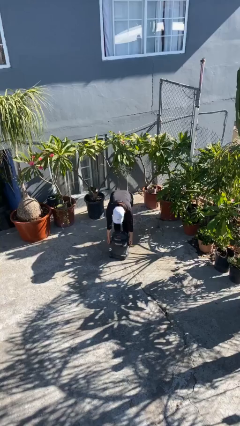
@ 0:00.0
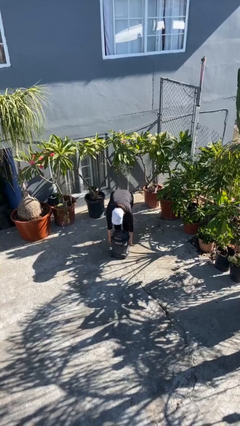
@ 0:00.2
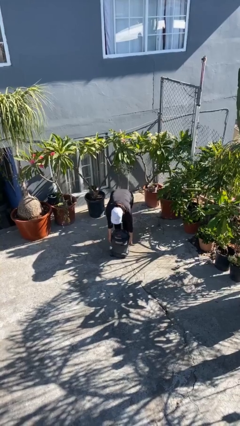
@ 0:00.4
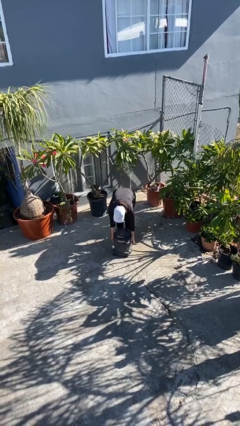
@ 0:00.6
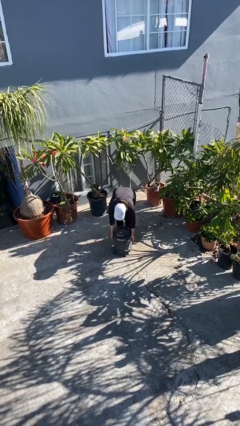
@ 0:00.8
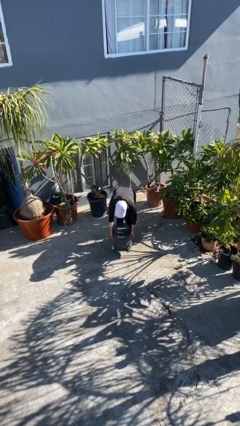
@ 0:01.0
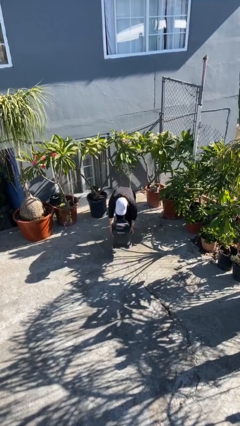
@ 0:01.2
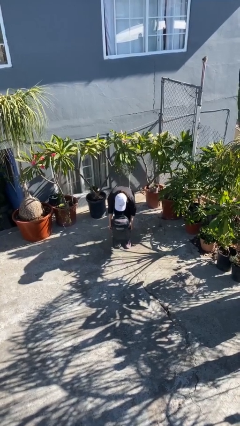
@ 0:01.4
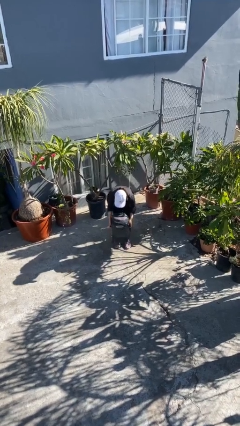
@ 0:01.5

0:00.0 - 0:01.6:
person picks up object from floor

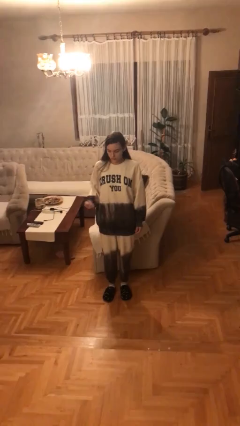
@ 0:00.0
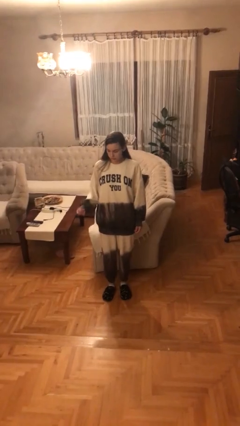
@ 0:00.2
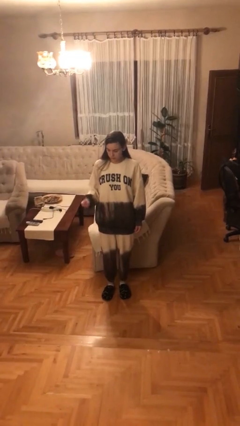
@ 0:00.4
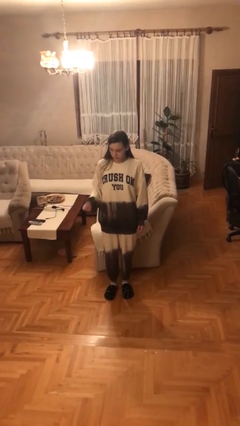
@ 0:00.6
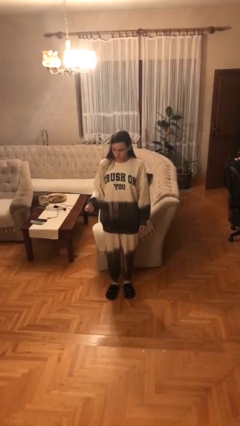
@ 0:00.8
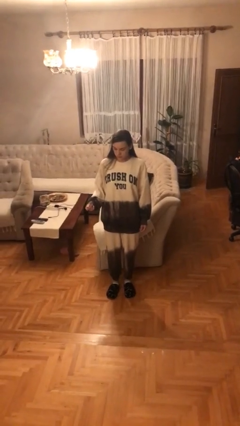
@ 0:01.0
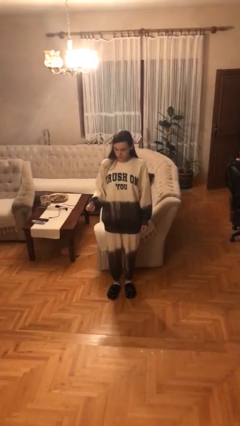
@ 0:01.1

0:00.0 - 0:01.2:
person snaps fingers

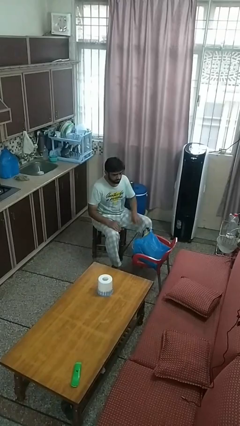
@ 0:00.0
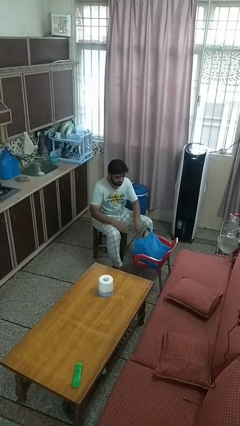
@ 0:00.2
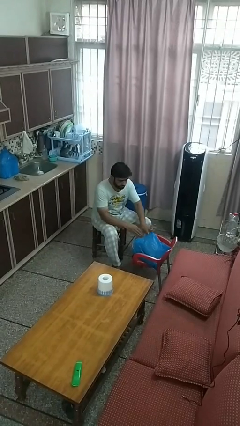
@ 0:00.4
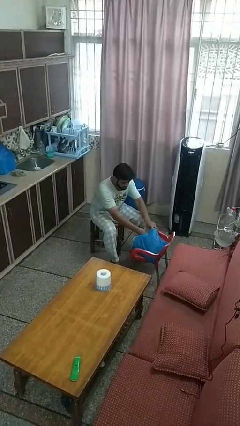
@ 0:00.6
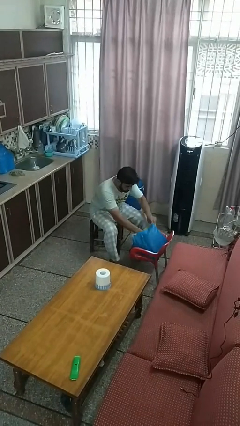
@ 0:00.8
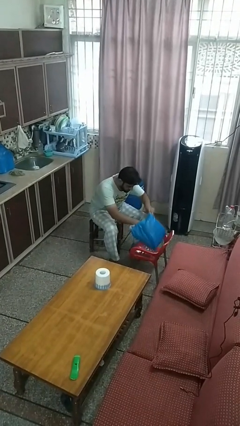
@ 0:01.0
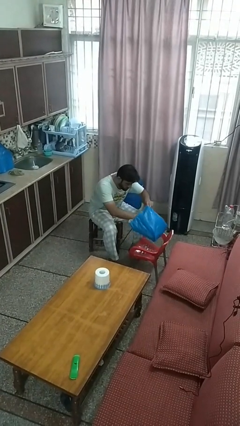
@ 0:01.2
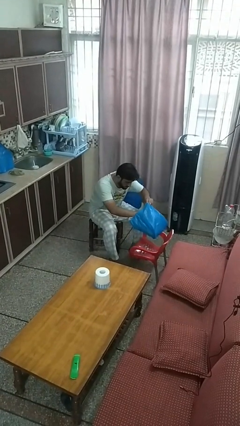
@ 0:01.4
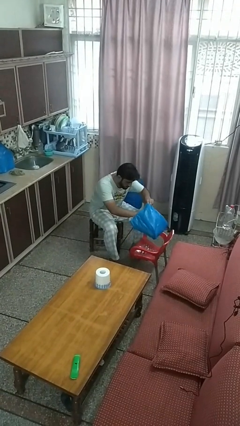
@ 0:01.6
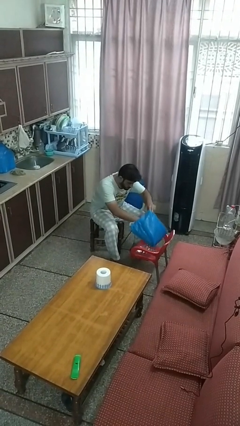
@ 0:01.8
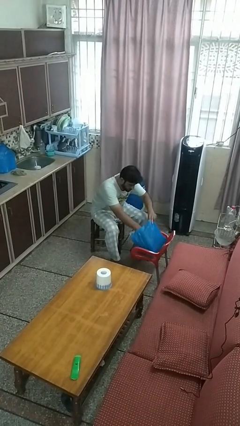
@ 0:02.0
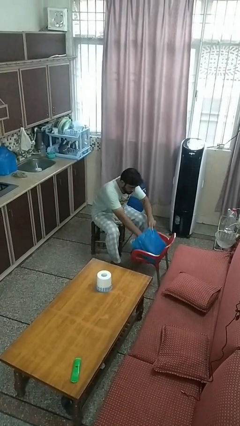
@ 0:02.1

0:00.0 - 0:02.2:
person searches in bag

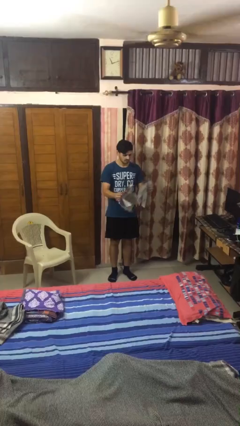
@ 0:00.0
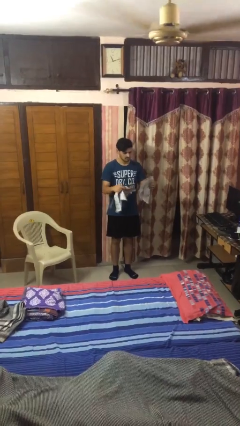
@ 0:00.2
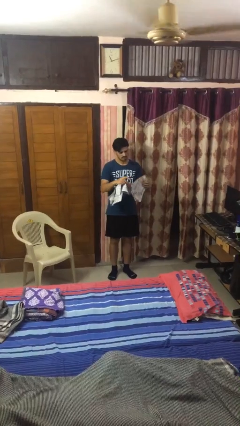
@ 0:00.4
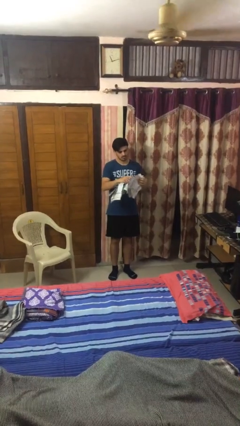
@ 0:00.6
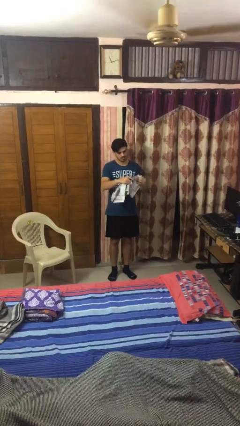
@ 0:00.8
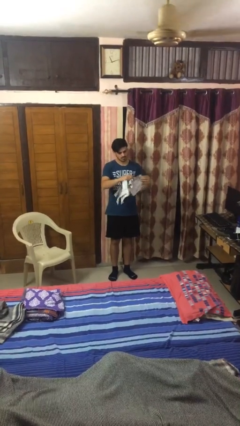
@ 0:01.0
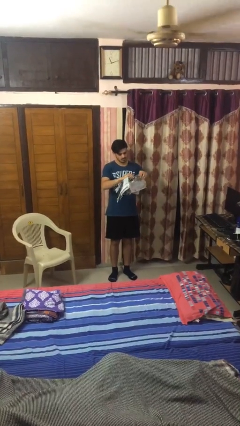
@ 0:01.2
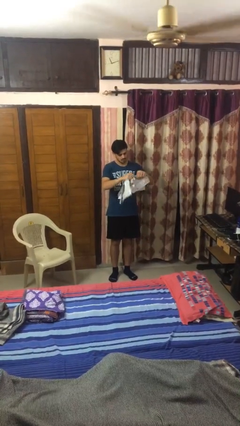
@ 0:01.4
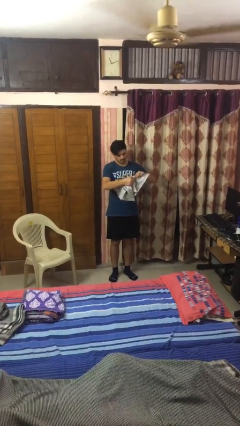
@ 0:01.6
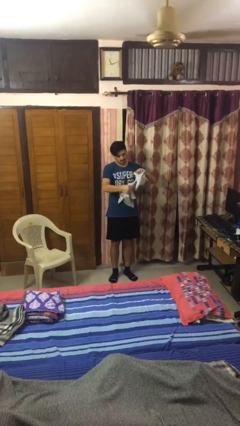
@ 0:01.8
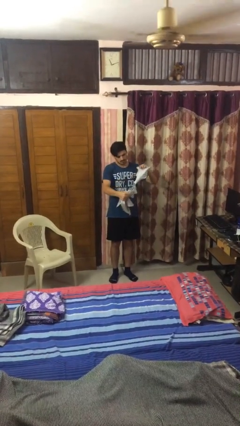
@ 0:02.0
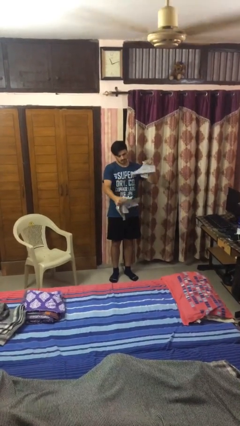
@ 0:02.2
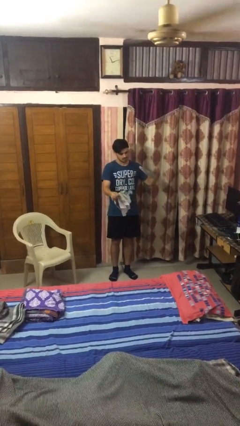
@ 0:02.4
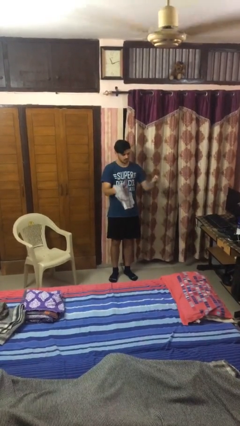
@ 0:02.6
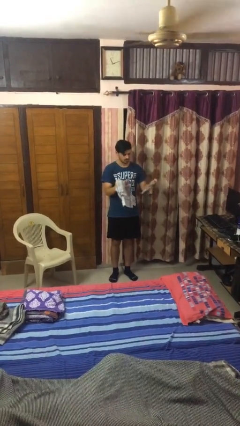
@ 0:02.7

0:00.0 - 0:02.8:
person tears paper

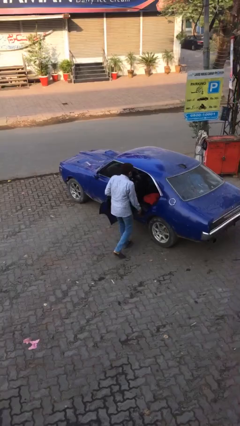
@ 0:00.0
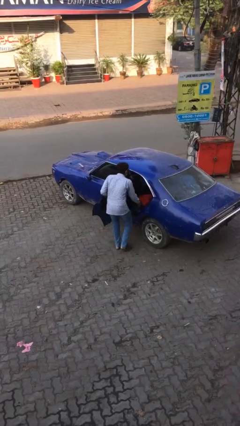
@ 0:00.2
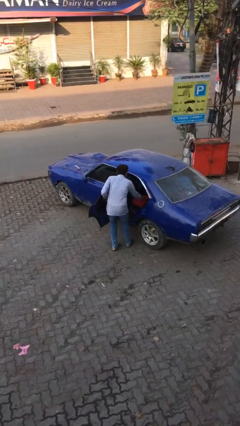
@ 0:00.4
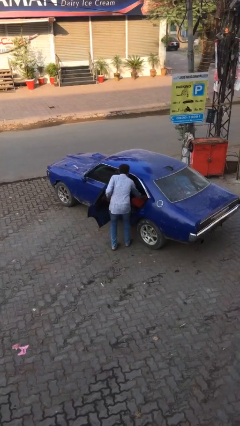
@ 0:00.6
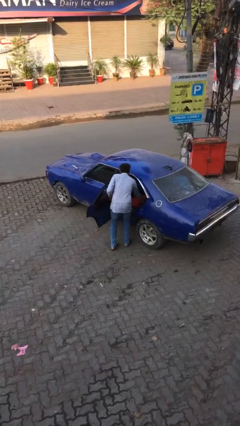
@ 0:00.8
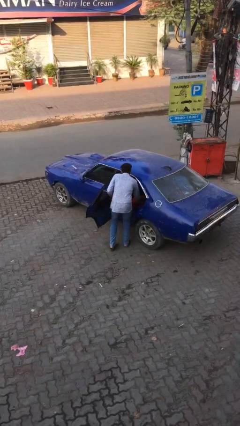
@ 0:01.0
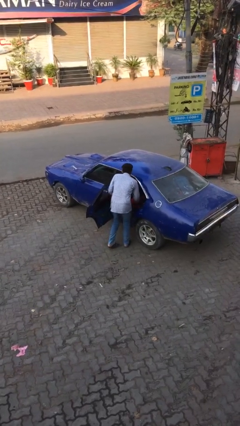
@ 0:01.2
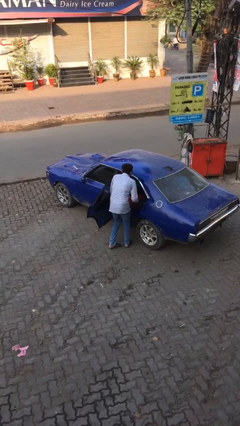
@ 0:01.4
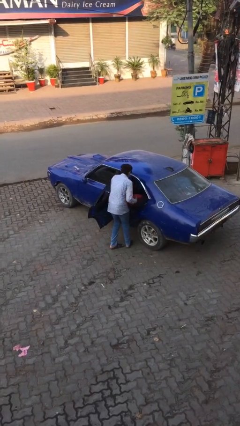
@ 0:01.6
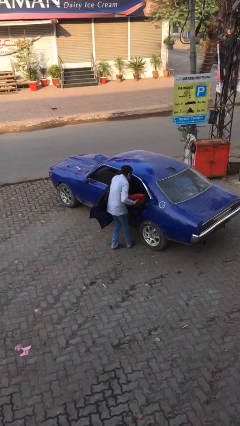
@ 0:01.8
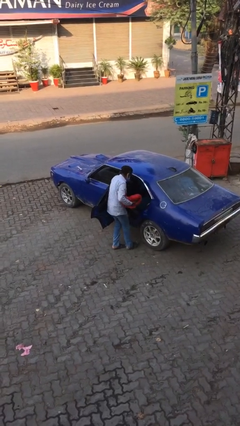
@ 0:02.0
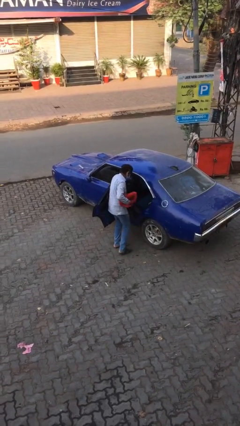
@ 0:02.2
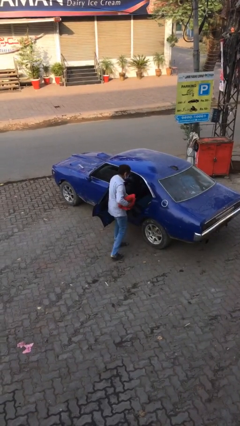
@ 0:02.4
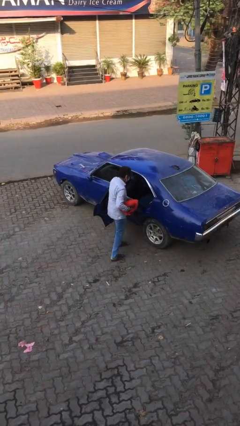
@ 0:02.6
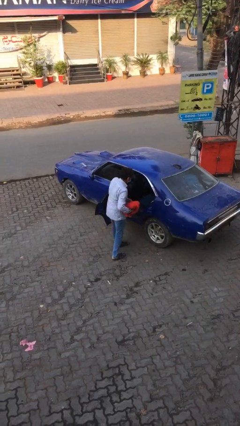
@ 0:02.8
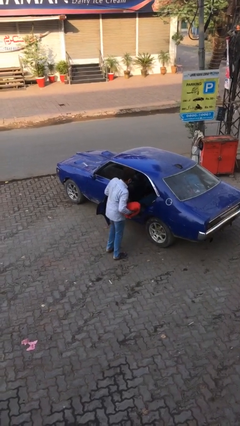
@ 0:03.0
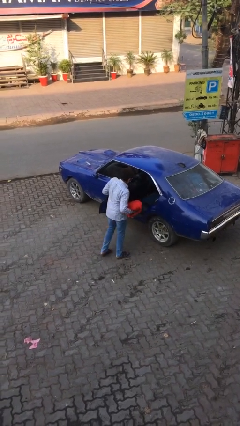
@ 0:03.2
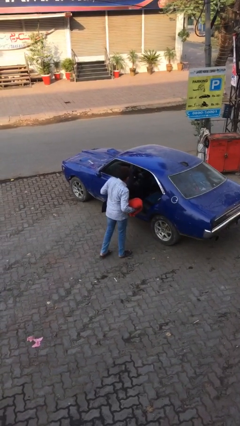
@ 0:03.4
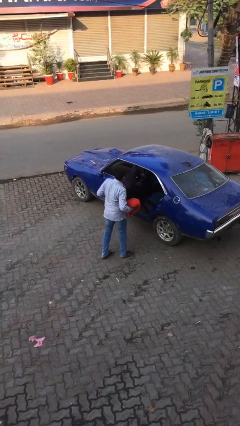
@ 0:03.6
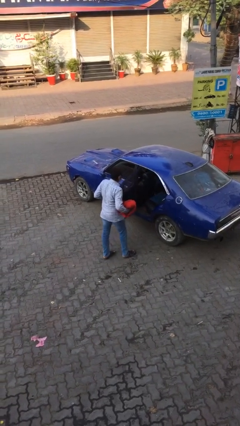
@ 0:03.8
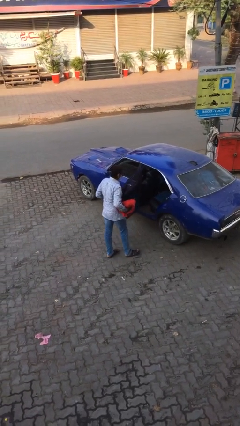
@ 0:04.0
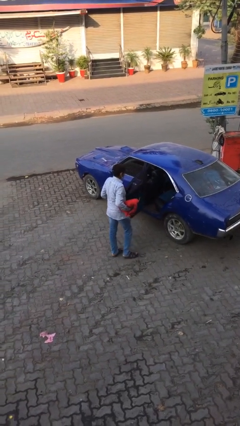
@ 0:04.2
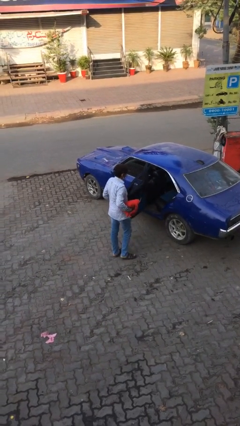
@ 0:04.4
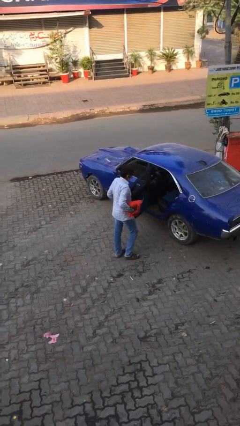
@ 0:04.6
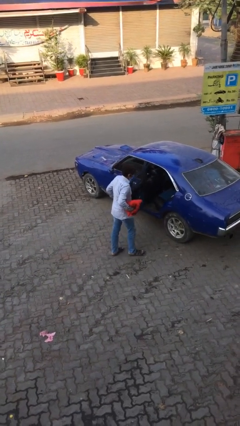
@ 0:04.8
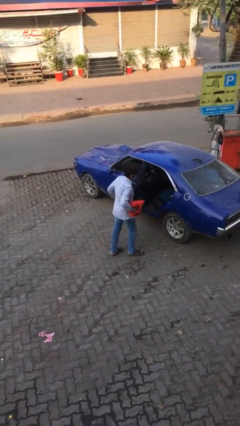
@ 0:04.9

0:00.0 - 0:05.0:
person unloads car

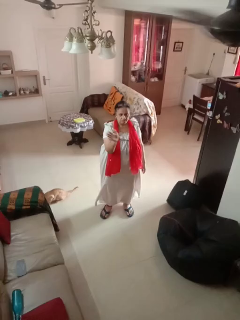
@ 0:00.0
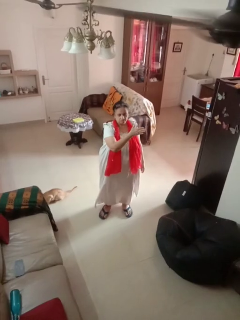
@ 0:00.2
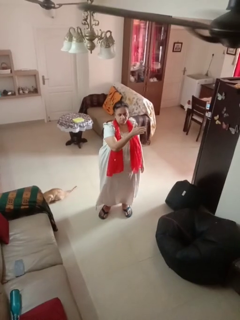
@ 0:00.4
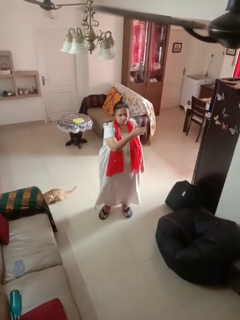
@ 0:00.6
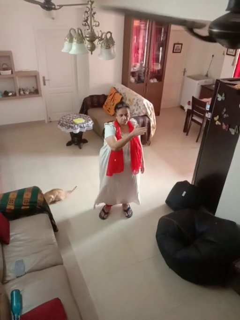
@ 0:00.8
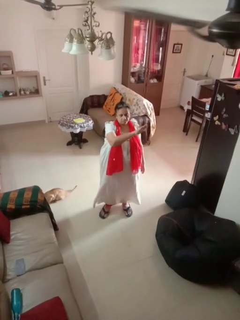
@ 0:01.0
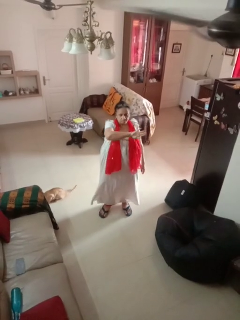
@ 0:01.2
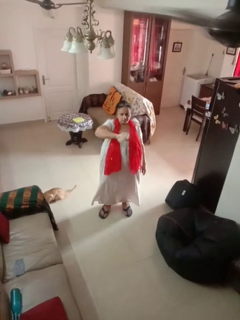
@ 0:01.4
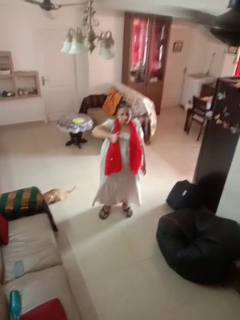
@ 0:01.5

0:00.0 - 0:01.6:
person gestures swipe left

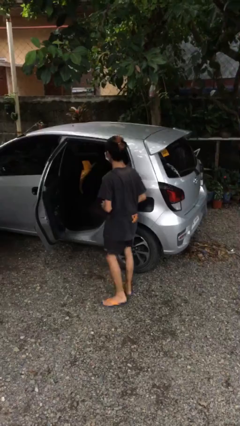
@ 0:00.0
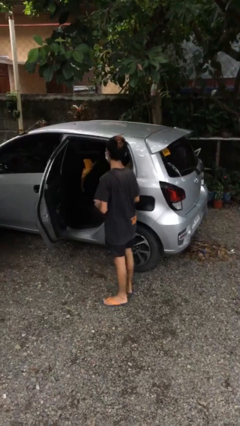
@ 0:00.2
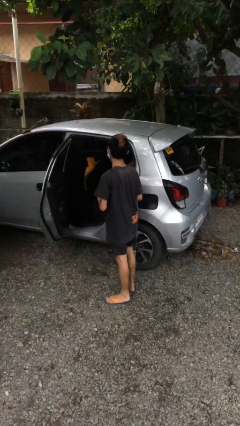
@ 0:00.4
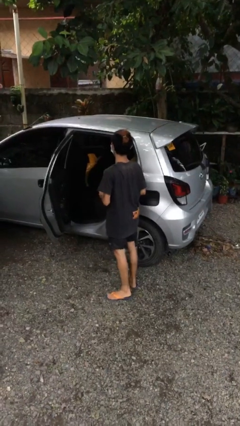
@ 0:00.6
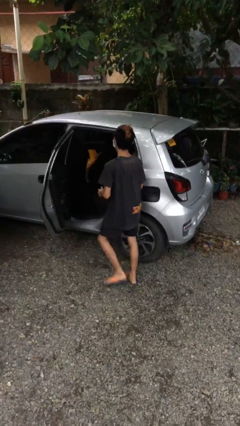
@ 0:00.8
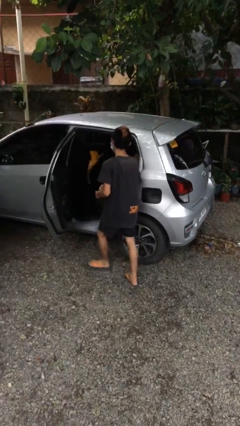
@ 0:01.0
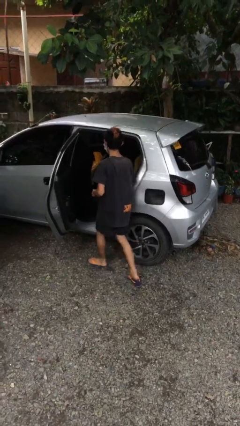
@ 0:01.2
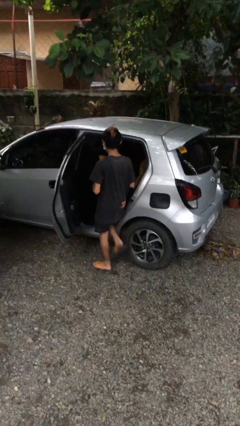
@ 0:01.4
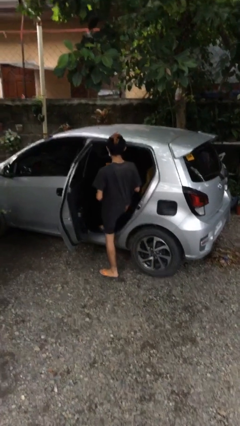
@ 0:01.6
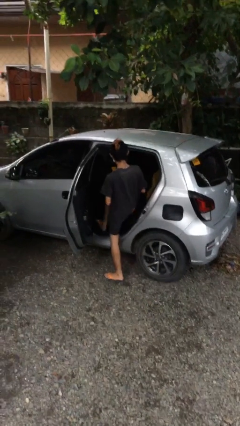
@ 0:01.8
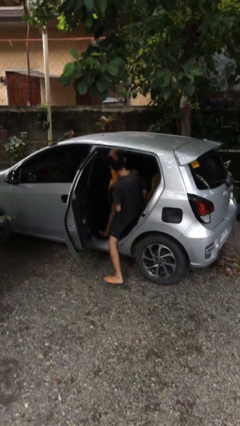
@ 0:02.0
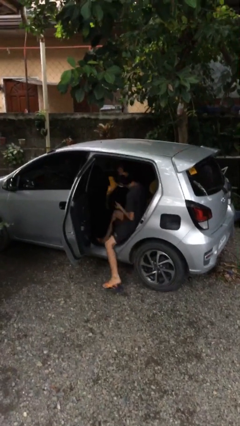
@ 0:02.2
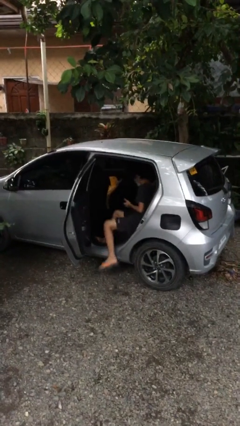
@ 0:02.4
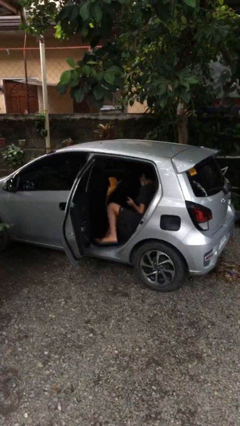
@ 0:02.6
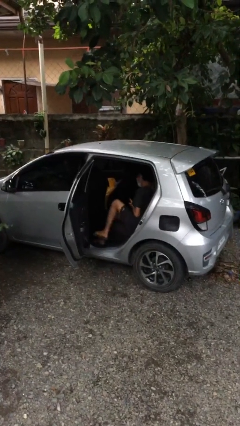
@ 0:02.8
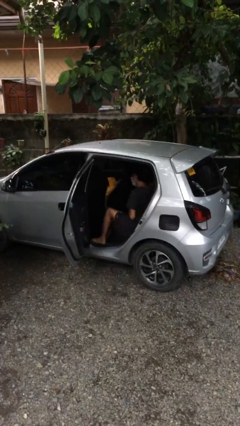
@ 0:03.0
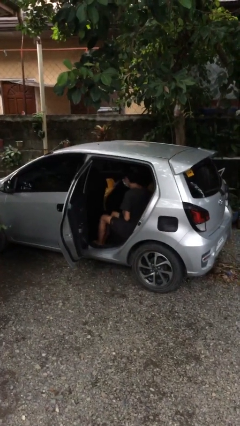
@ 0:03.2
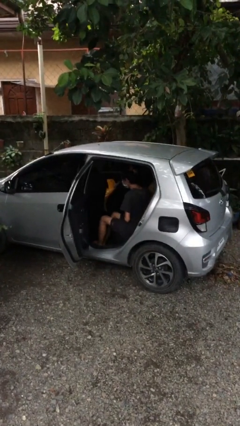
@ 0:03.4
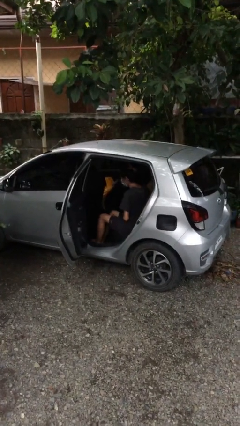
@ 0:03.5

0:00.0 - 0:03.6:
person enters car
